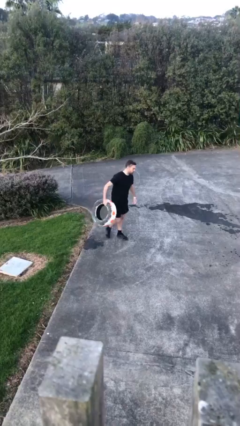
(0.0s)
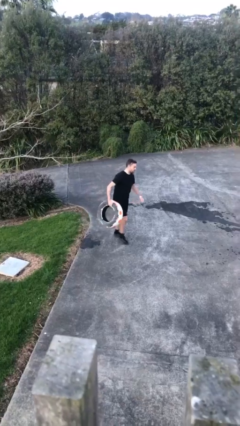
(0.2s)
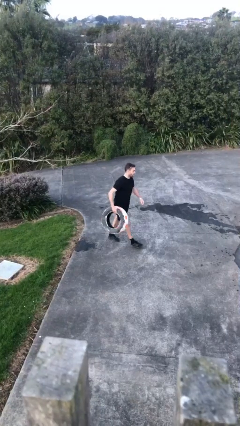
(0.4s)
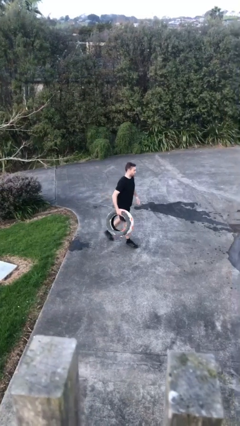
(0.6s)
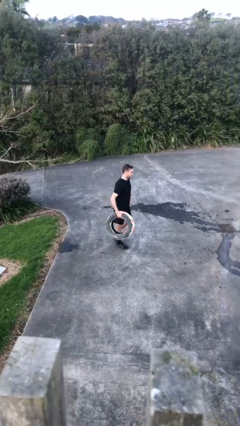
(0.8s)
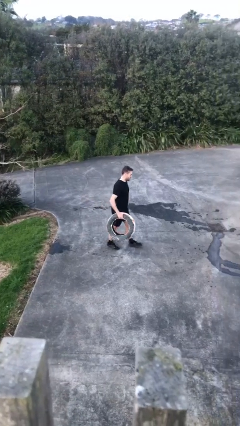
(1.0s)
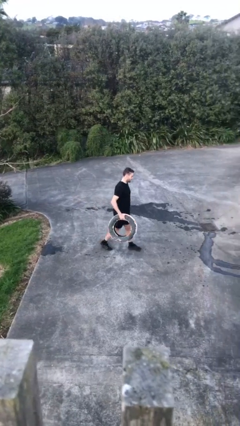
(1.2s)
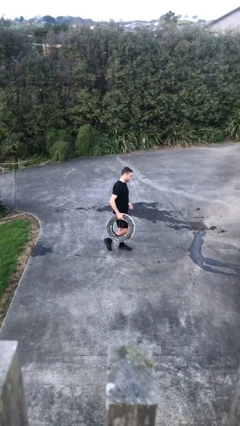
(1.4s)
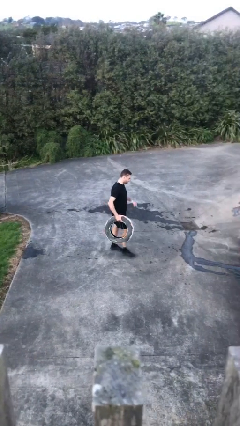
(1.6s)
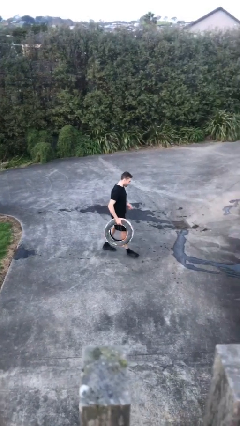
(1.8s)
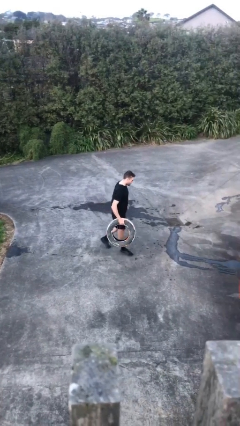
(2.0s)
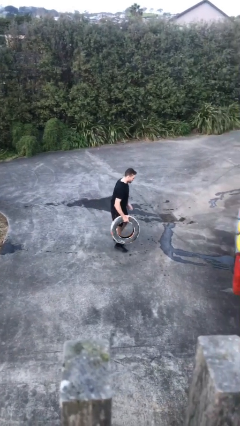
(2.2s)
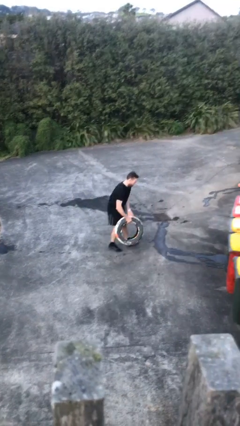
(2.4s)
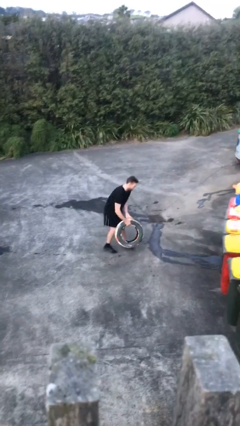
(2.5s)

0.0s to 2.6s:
person carries heavy object

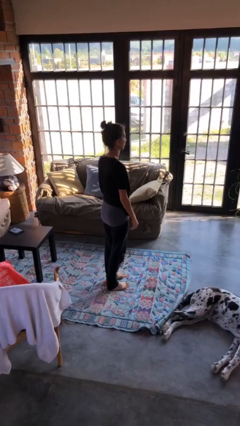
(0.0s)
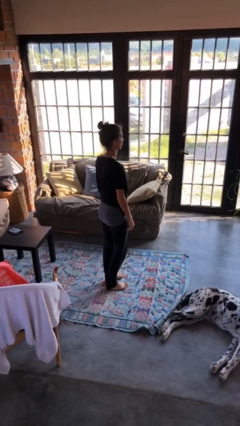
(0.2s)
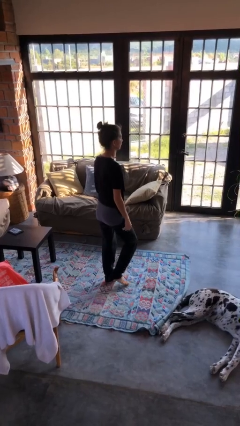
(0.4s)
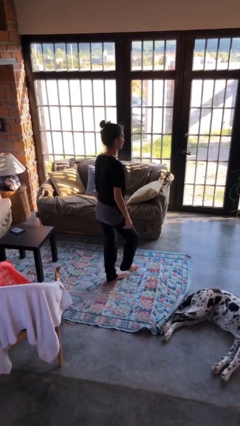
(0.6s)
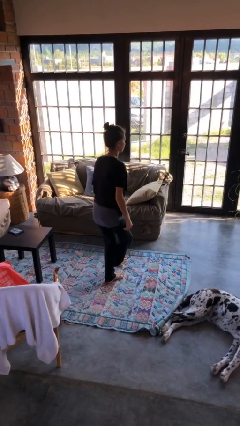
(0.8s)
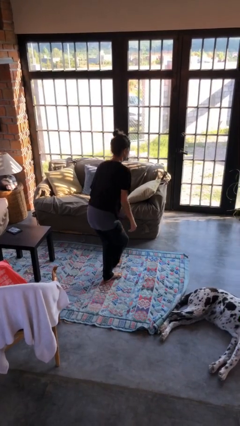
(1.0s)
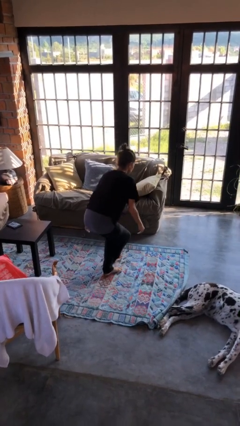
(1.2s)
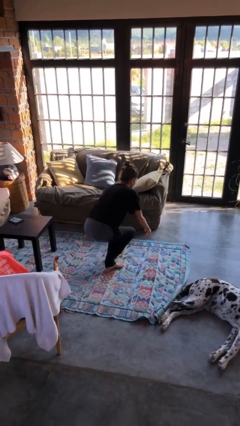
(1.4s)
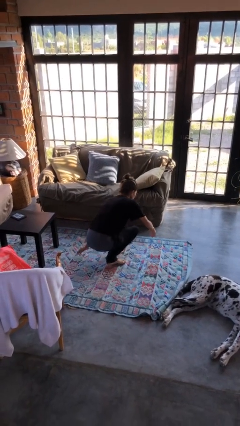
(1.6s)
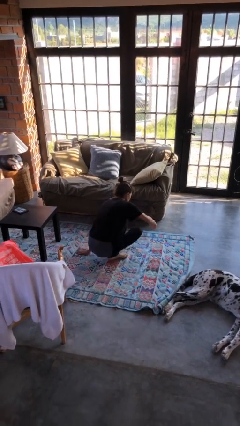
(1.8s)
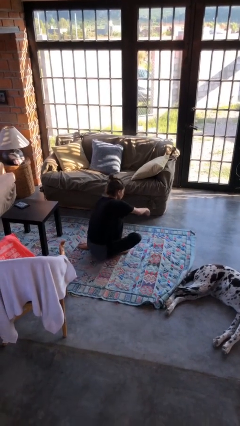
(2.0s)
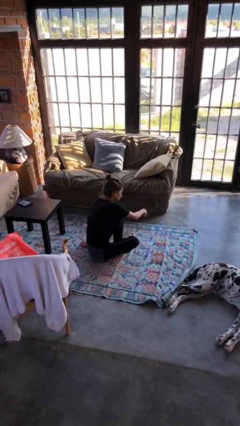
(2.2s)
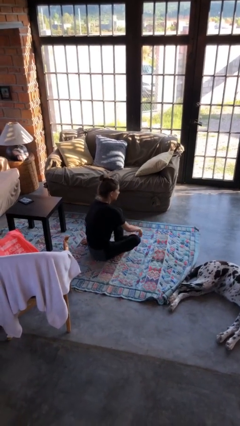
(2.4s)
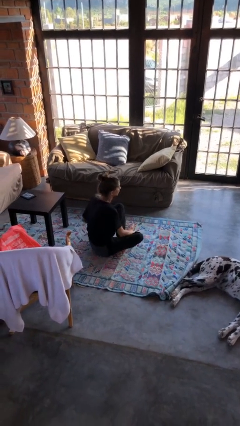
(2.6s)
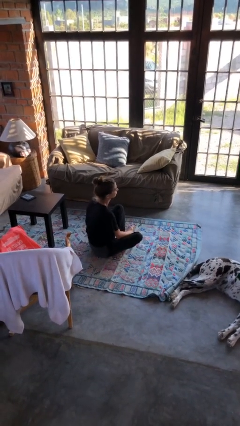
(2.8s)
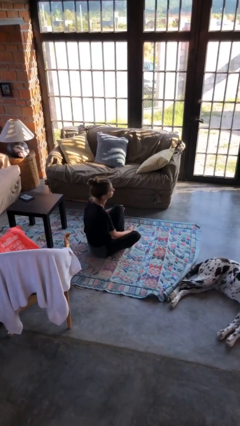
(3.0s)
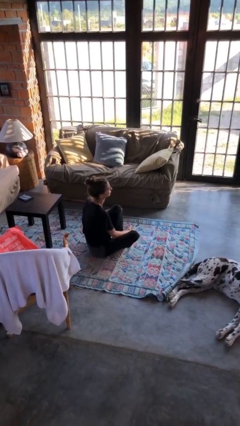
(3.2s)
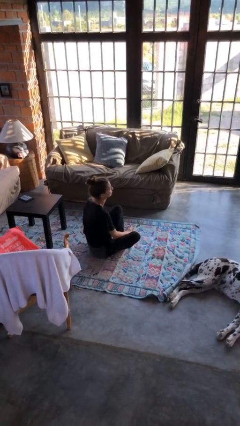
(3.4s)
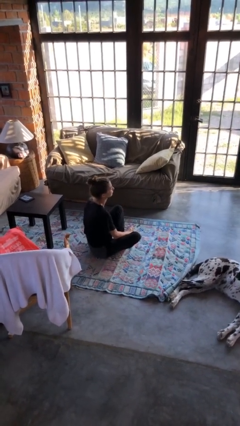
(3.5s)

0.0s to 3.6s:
person sits crisscross

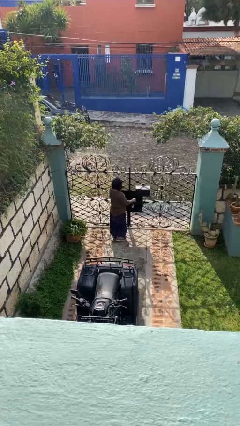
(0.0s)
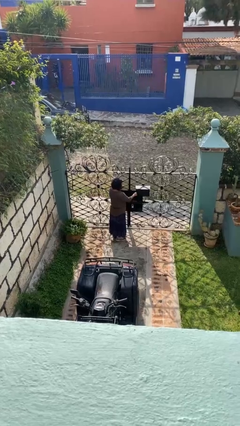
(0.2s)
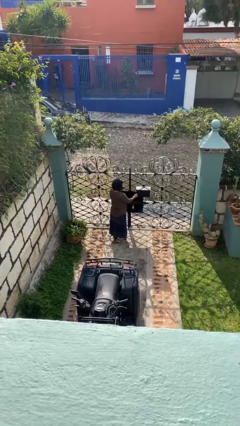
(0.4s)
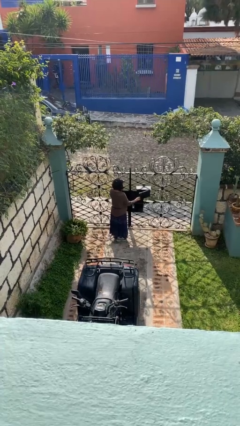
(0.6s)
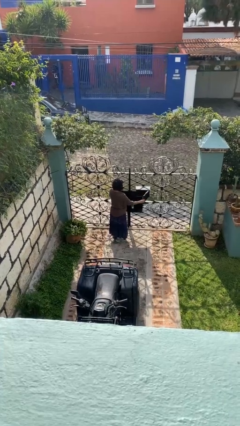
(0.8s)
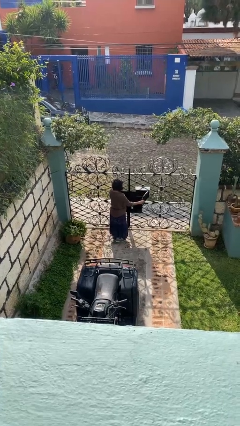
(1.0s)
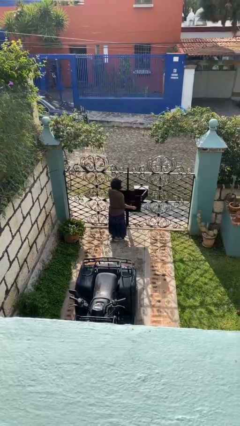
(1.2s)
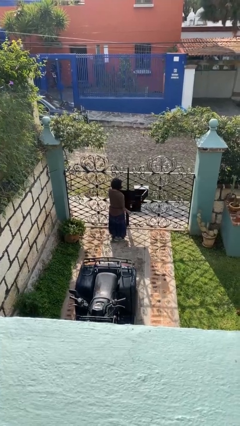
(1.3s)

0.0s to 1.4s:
person opens mailbox

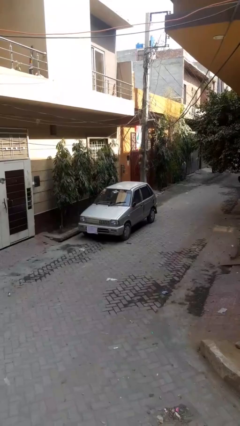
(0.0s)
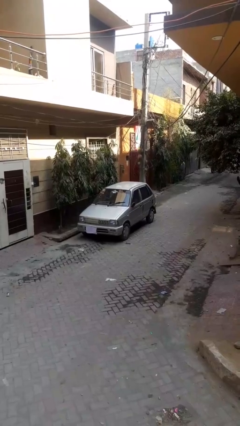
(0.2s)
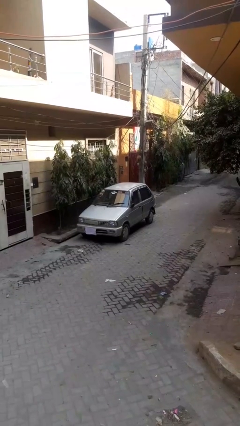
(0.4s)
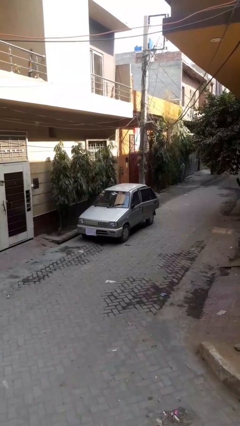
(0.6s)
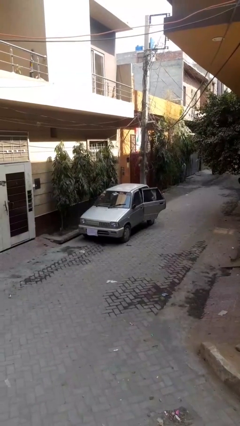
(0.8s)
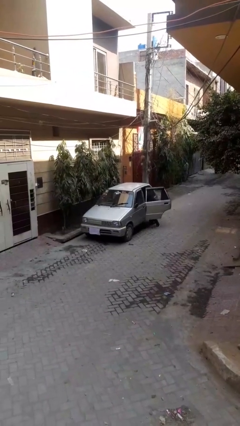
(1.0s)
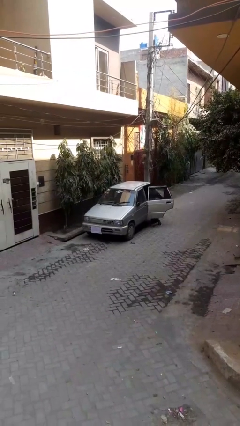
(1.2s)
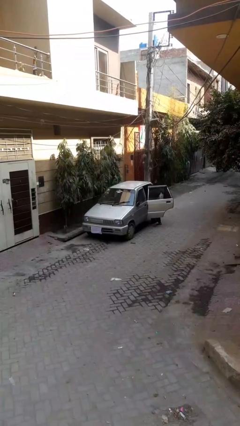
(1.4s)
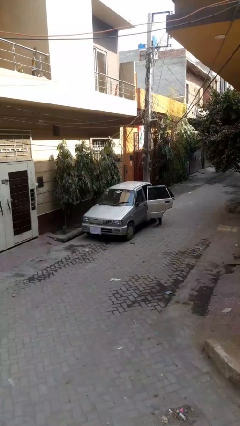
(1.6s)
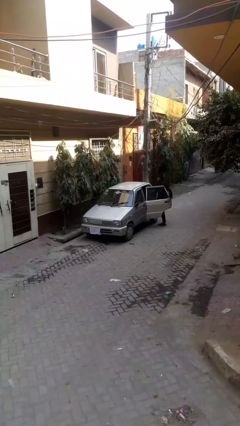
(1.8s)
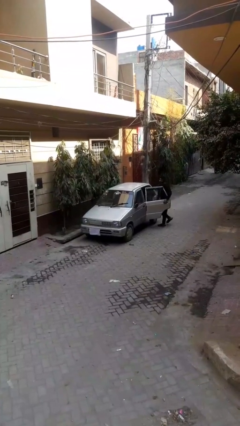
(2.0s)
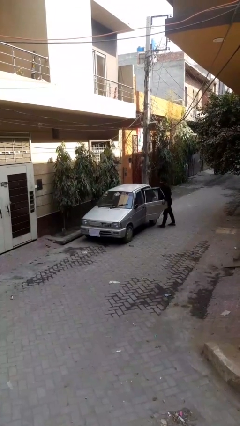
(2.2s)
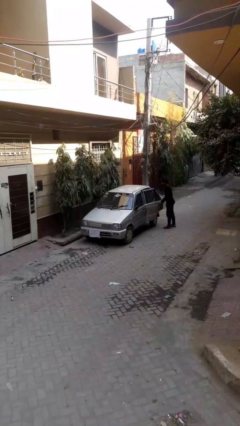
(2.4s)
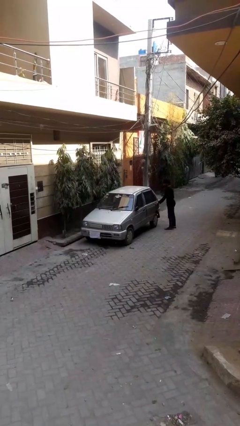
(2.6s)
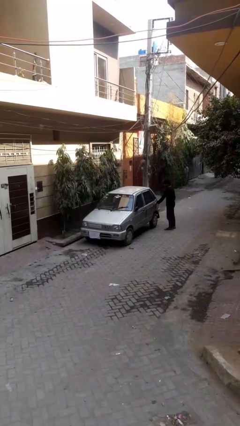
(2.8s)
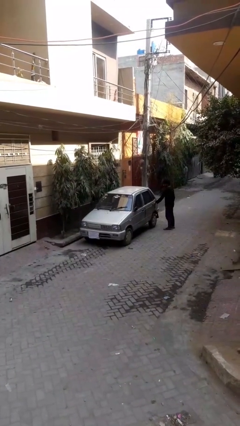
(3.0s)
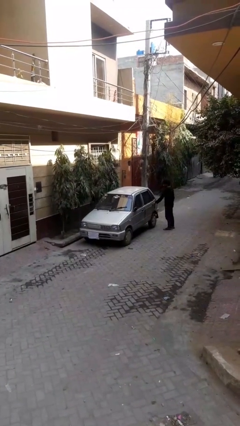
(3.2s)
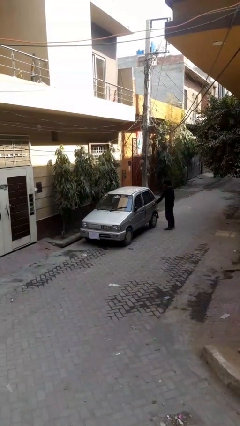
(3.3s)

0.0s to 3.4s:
car drops off person

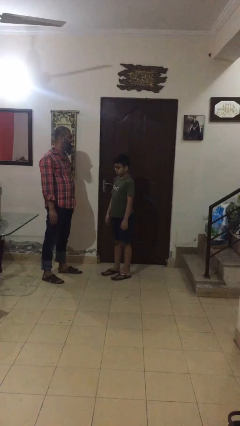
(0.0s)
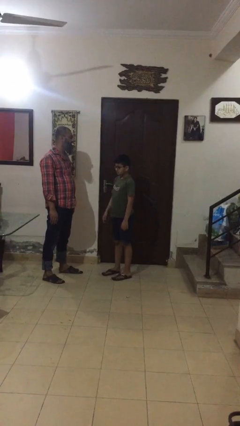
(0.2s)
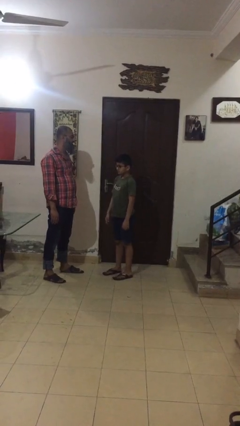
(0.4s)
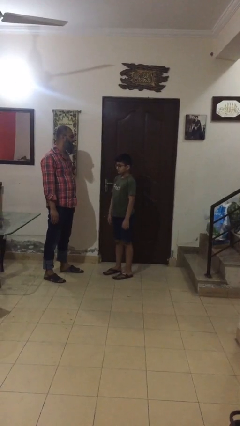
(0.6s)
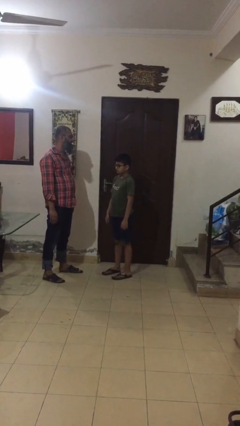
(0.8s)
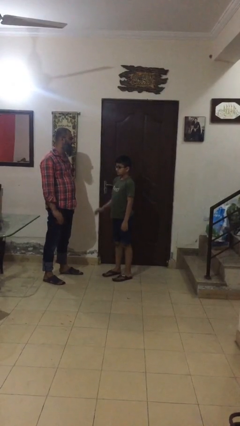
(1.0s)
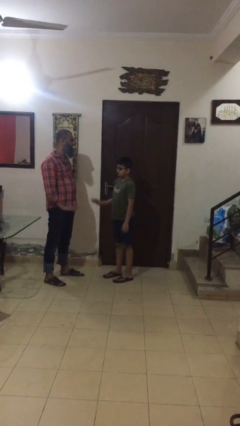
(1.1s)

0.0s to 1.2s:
person highfives hand

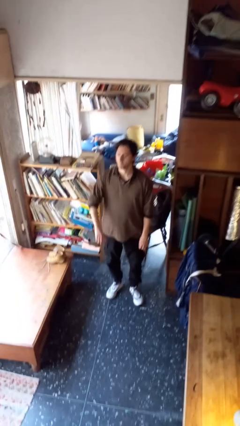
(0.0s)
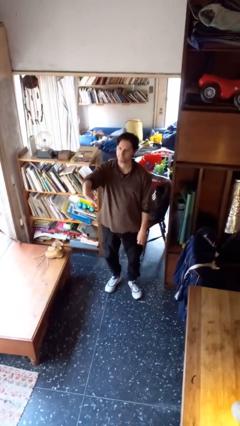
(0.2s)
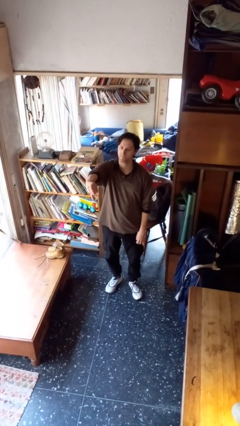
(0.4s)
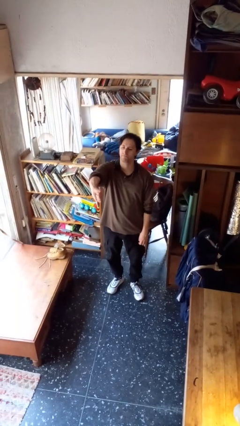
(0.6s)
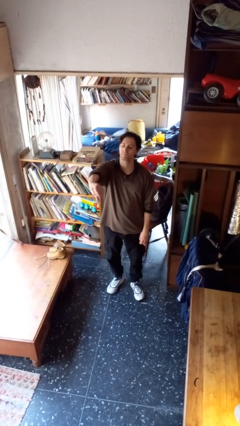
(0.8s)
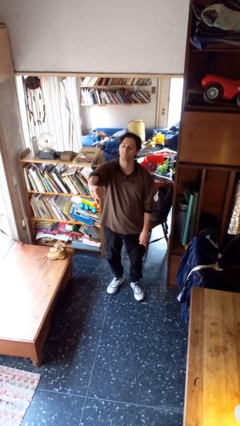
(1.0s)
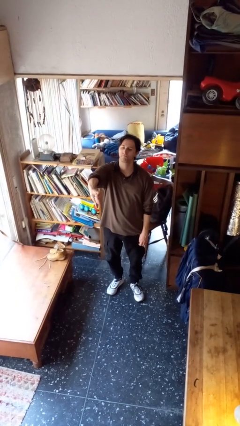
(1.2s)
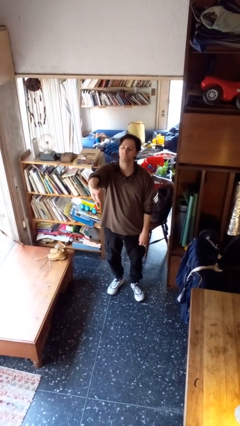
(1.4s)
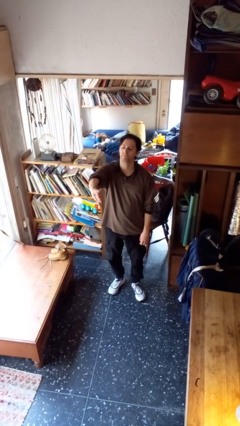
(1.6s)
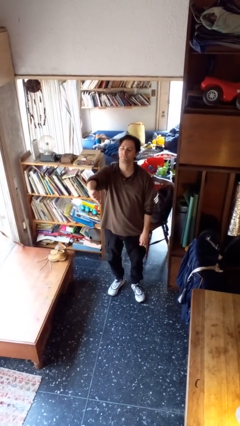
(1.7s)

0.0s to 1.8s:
person gestures thumbs down

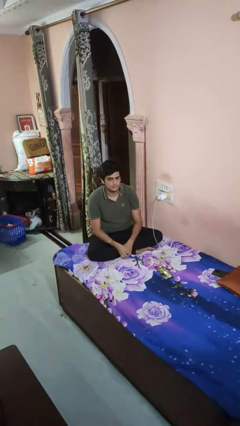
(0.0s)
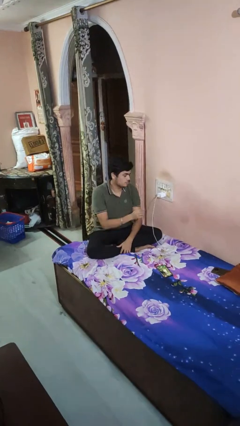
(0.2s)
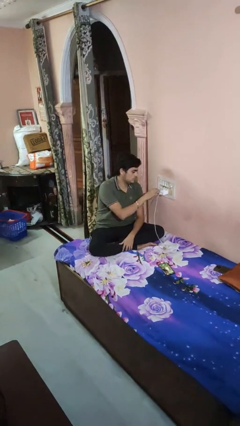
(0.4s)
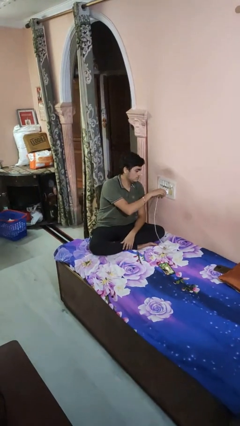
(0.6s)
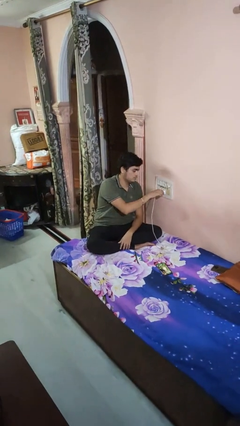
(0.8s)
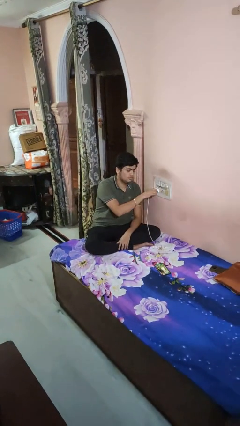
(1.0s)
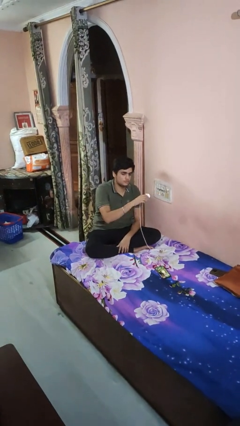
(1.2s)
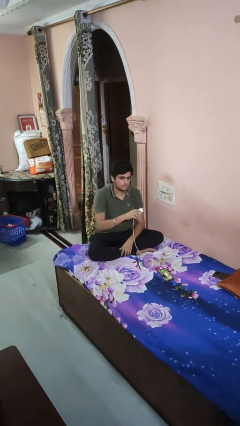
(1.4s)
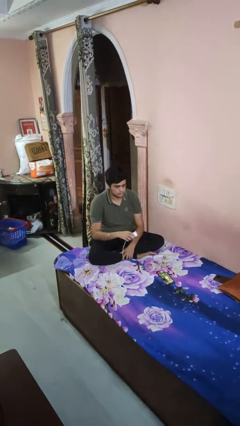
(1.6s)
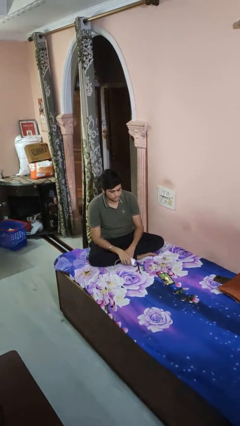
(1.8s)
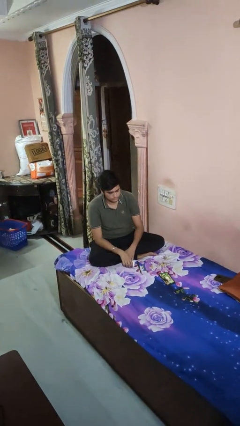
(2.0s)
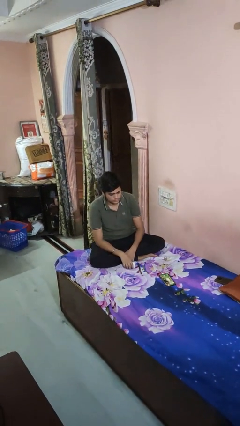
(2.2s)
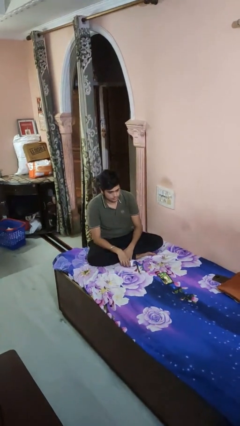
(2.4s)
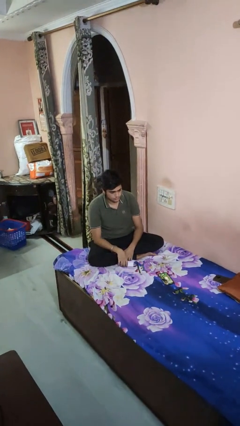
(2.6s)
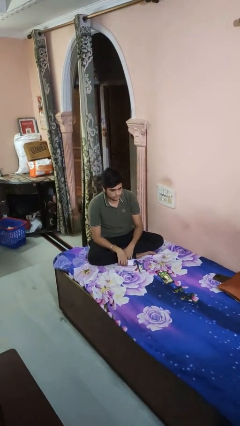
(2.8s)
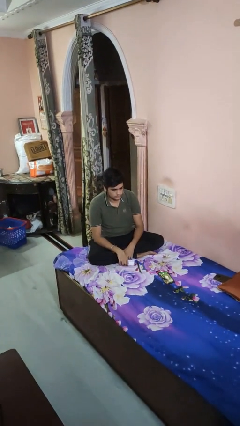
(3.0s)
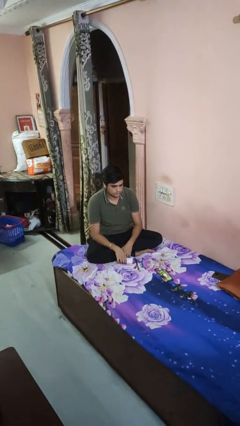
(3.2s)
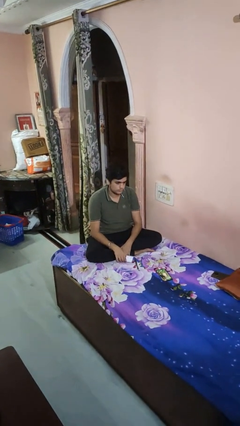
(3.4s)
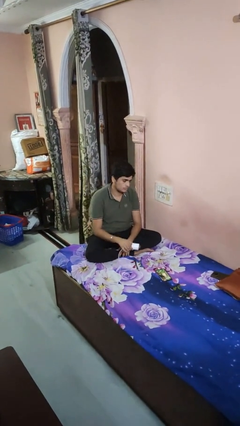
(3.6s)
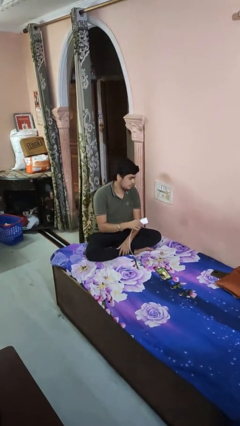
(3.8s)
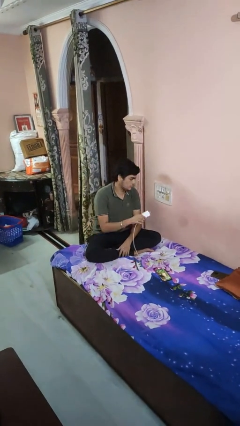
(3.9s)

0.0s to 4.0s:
person unplugs from electrical socket
